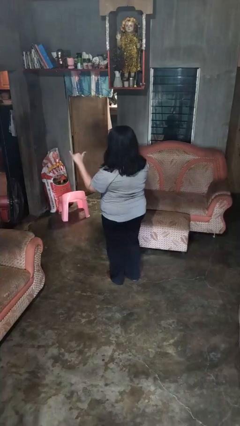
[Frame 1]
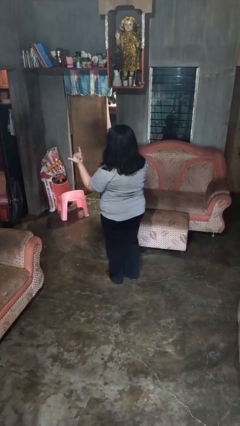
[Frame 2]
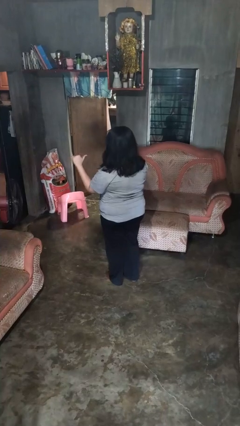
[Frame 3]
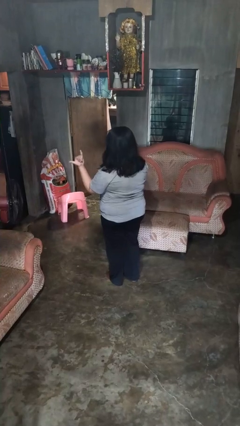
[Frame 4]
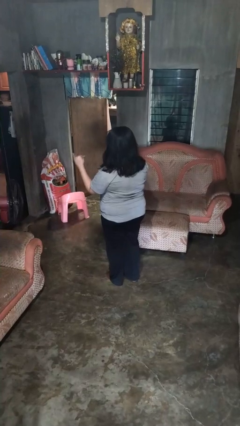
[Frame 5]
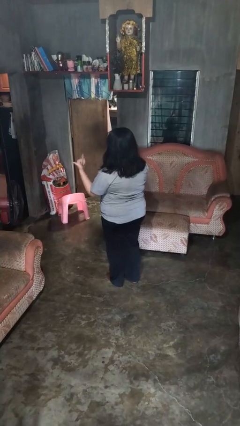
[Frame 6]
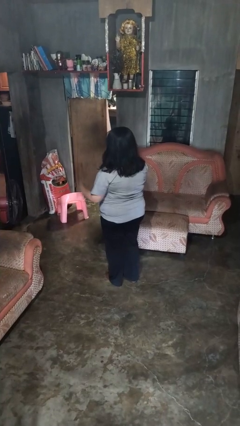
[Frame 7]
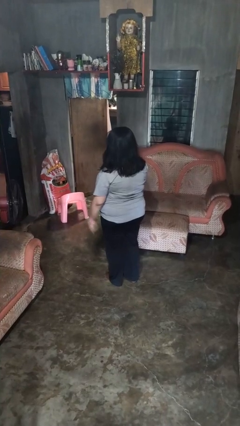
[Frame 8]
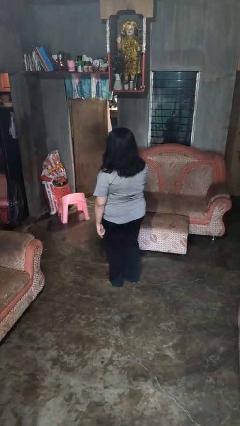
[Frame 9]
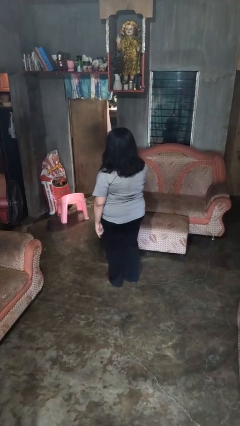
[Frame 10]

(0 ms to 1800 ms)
person gestures hang loose

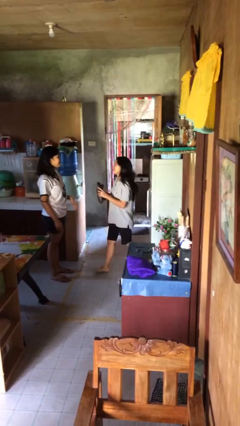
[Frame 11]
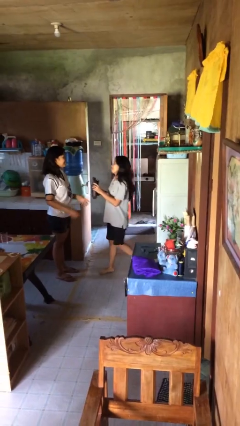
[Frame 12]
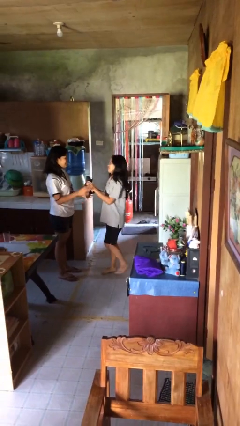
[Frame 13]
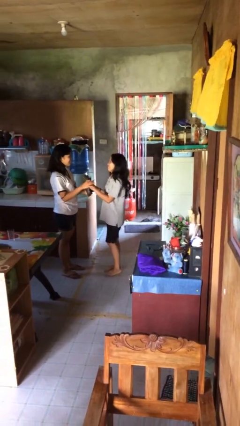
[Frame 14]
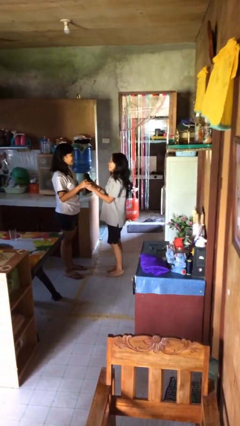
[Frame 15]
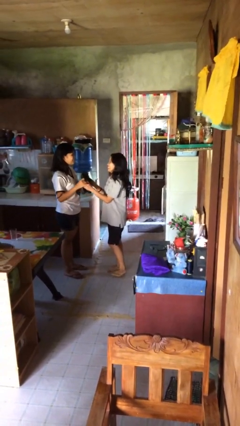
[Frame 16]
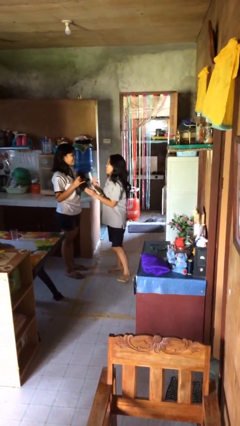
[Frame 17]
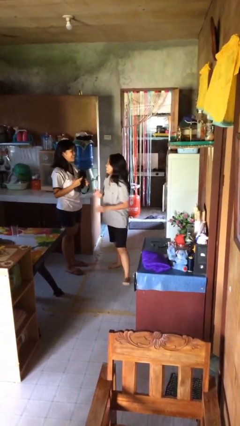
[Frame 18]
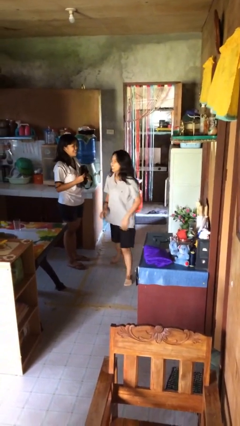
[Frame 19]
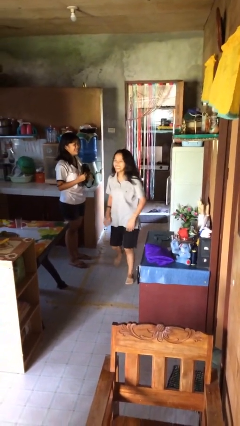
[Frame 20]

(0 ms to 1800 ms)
person transfers object to person

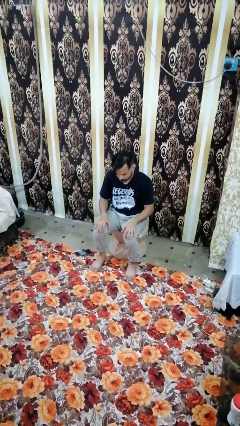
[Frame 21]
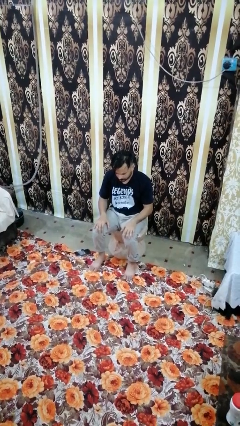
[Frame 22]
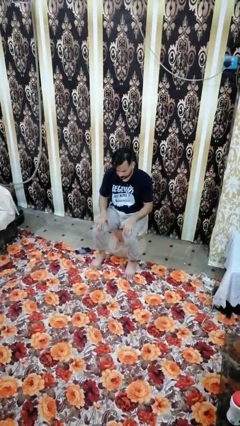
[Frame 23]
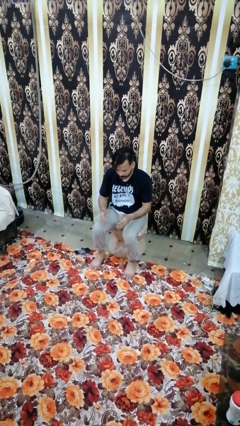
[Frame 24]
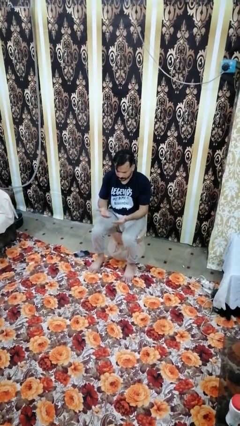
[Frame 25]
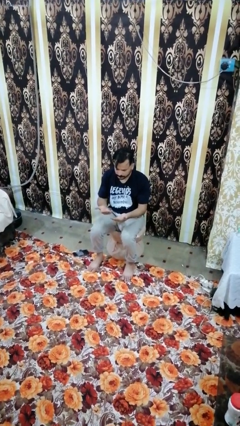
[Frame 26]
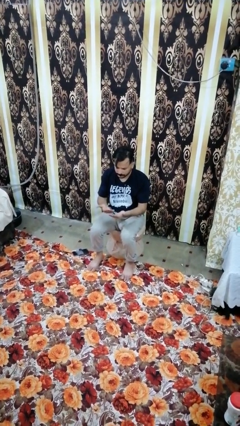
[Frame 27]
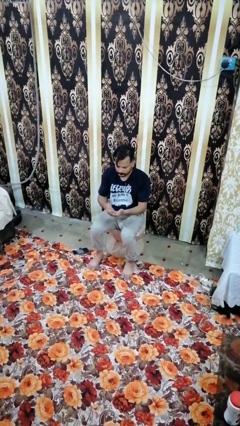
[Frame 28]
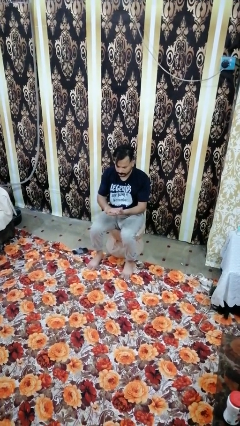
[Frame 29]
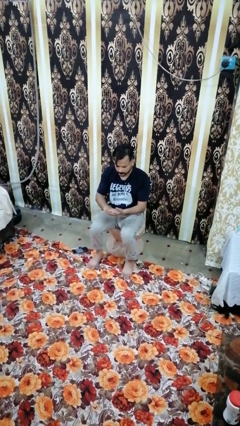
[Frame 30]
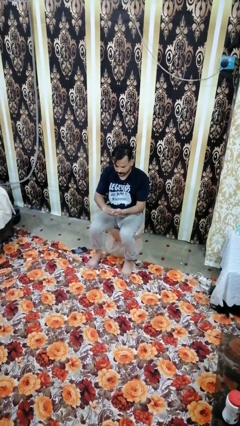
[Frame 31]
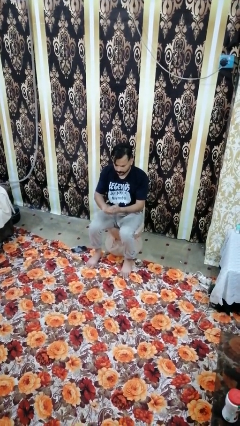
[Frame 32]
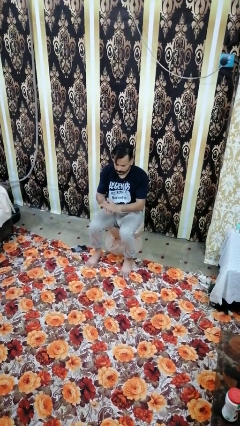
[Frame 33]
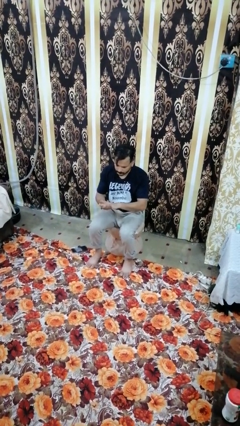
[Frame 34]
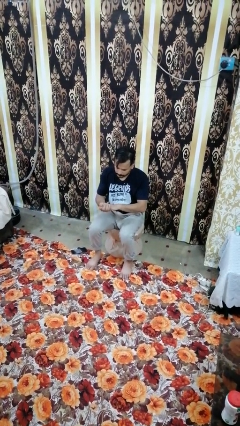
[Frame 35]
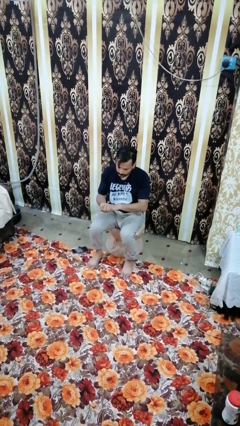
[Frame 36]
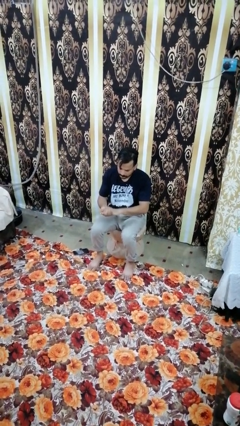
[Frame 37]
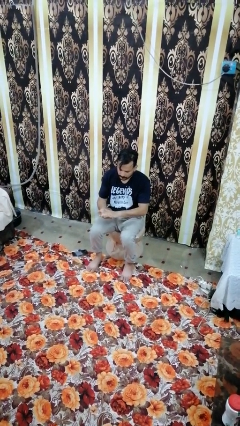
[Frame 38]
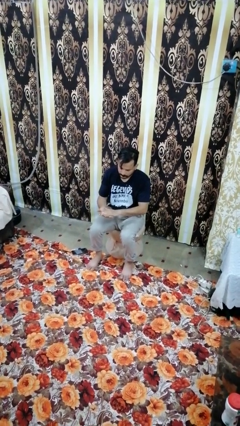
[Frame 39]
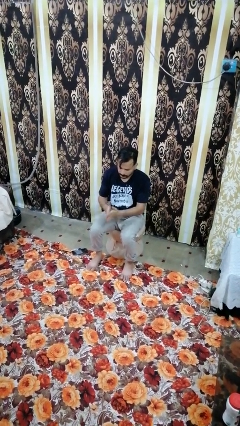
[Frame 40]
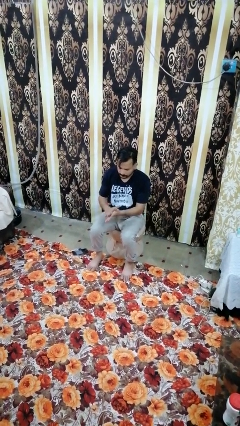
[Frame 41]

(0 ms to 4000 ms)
person looks at hands in lap

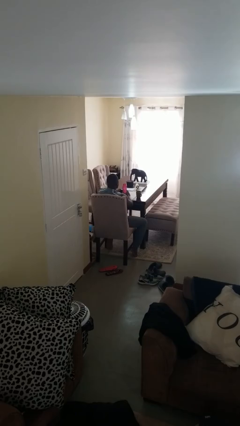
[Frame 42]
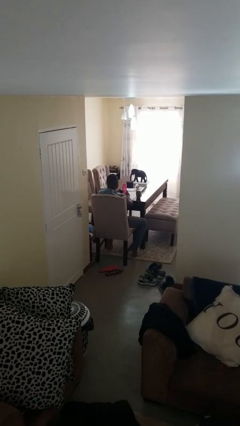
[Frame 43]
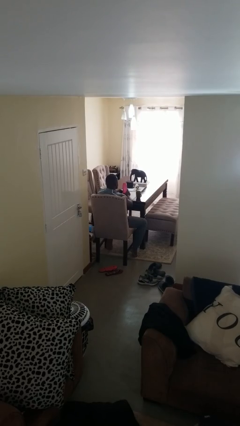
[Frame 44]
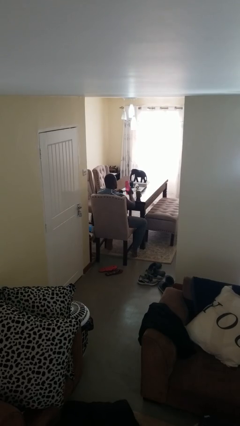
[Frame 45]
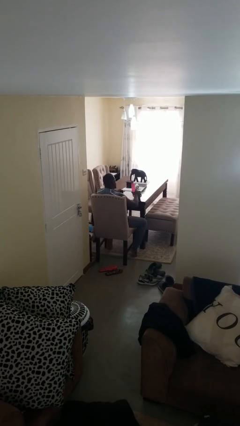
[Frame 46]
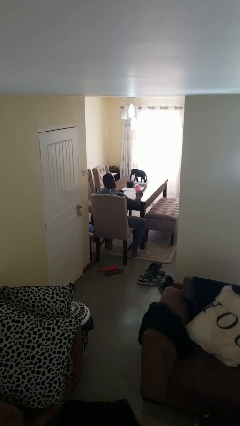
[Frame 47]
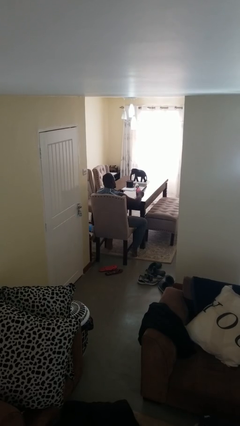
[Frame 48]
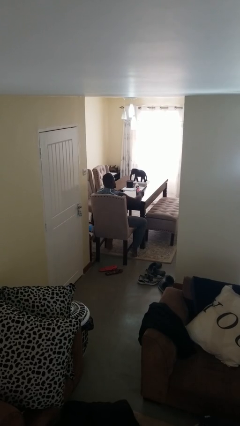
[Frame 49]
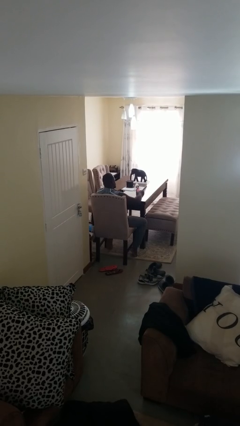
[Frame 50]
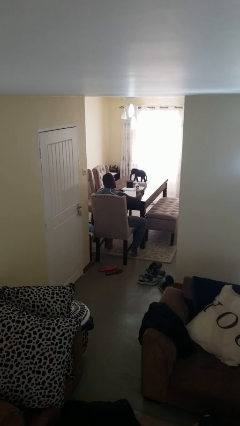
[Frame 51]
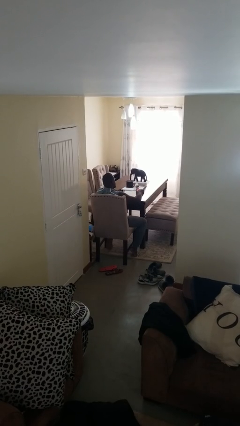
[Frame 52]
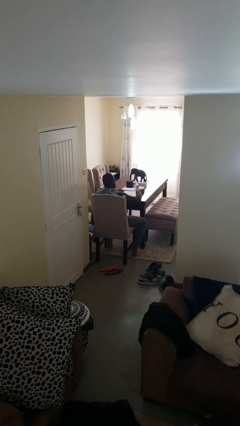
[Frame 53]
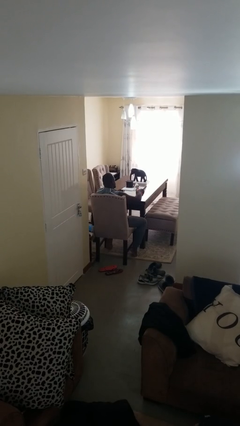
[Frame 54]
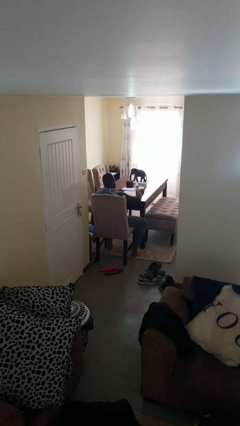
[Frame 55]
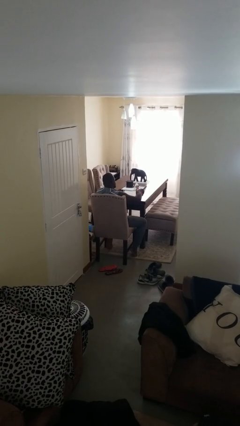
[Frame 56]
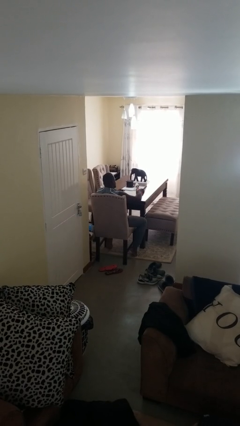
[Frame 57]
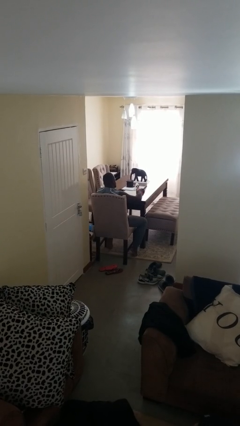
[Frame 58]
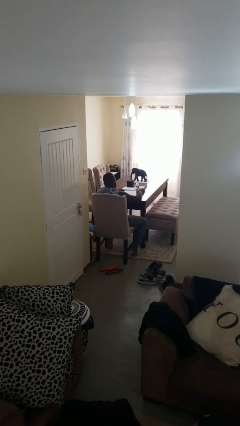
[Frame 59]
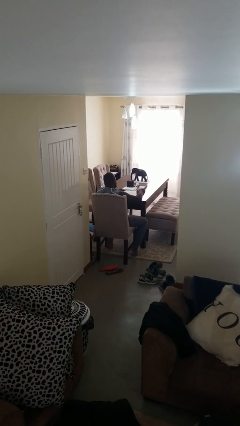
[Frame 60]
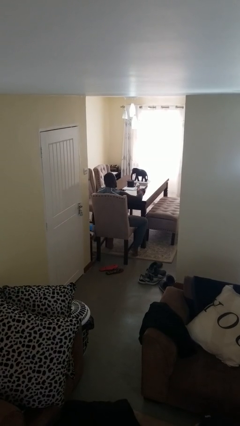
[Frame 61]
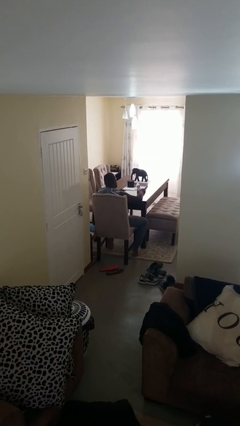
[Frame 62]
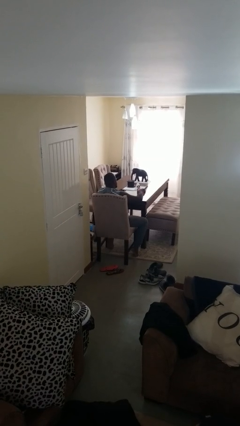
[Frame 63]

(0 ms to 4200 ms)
person pours liquid into cup

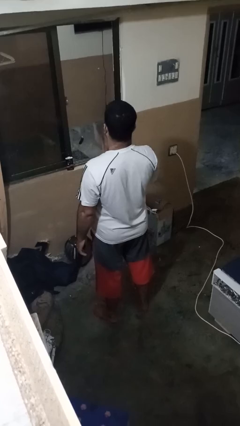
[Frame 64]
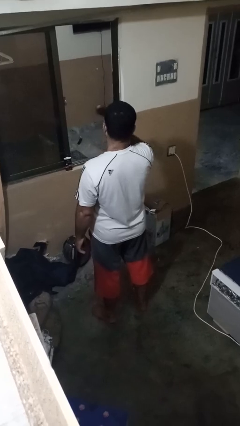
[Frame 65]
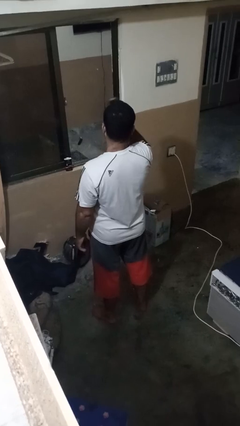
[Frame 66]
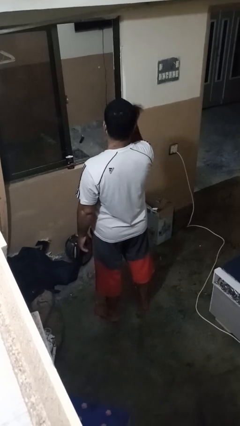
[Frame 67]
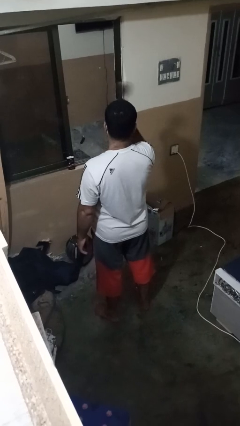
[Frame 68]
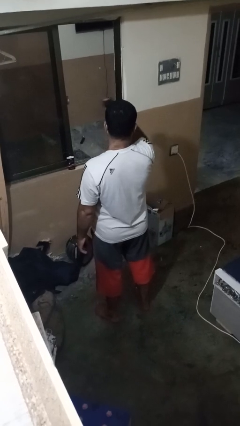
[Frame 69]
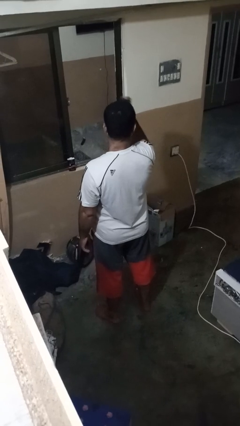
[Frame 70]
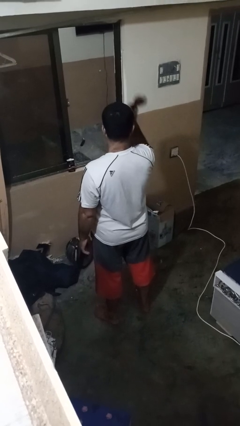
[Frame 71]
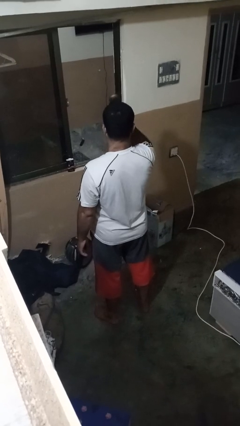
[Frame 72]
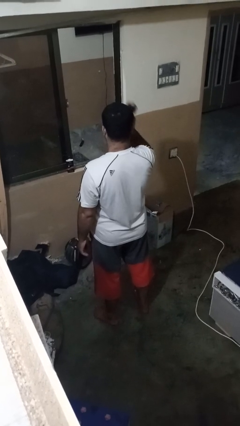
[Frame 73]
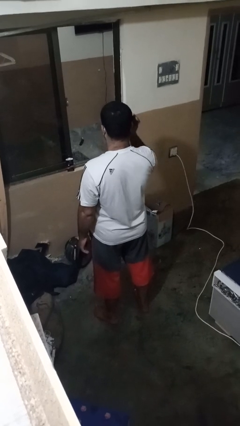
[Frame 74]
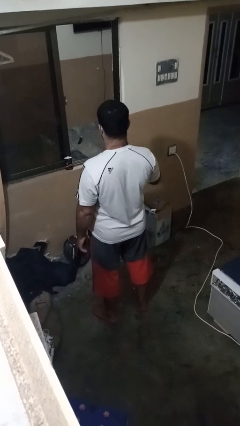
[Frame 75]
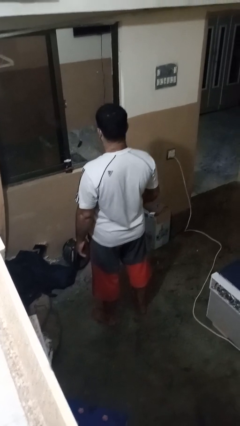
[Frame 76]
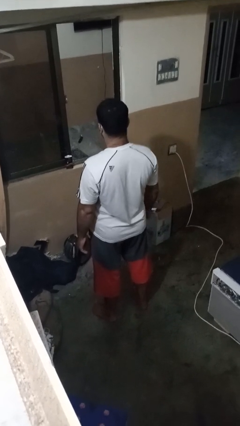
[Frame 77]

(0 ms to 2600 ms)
person brushes hair

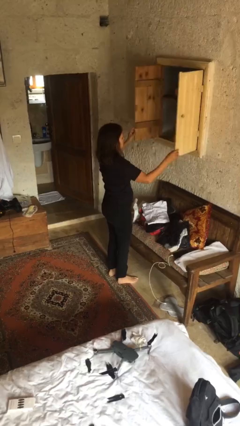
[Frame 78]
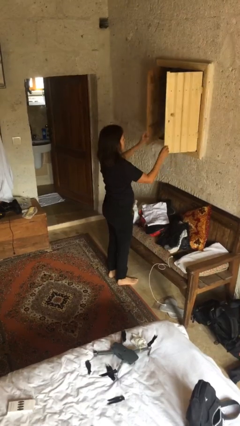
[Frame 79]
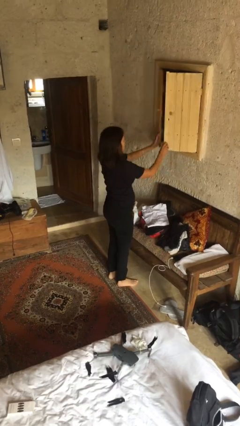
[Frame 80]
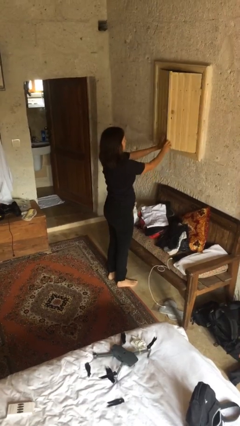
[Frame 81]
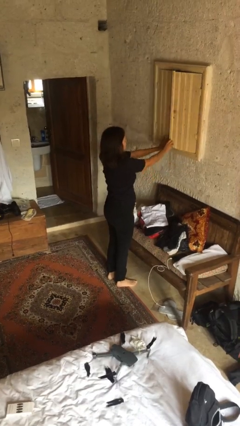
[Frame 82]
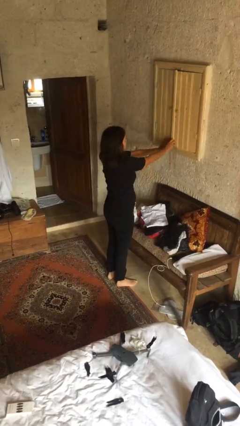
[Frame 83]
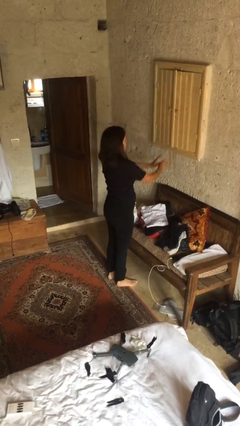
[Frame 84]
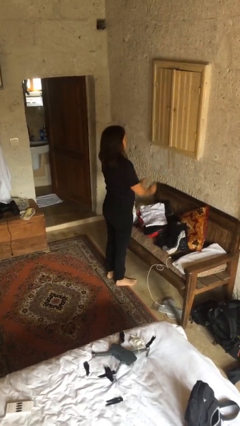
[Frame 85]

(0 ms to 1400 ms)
person closes dresser drawer

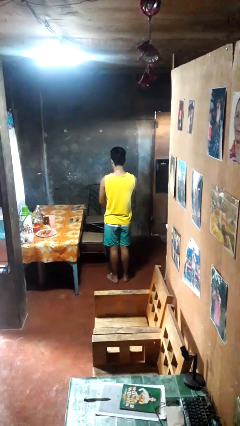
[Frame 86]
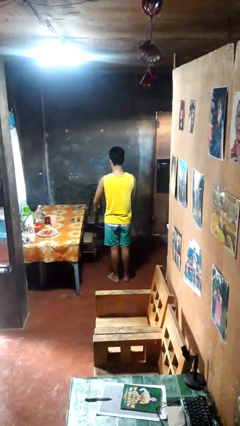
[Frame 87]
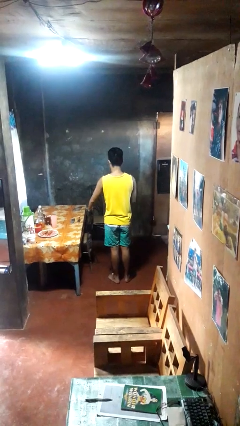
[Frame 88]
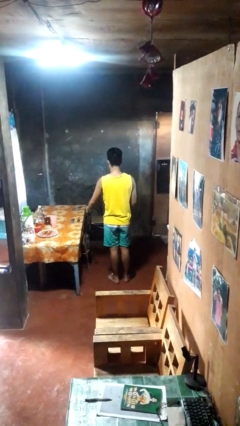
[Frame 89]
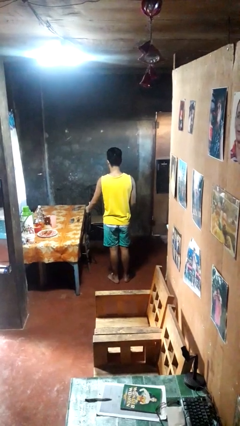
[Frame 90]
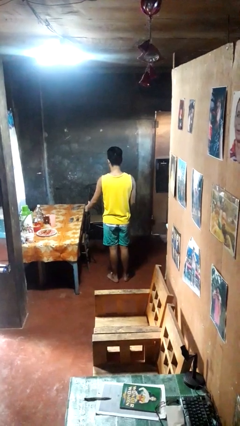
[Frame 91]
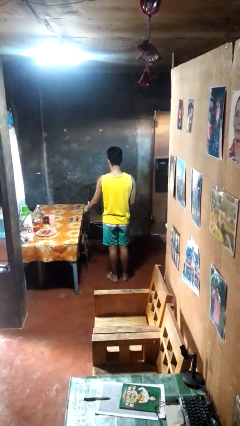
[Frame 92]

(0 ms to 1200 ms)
person pushes in chair
